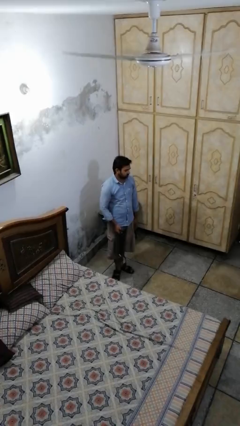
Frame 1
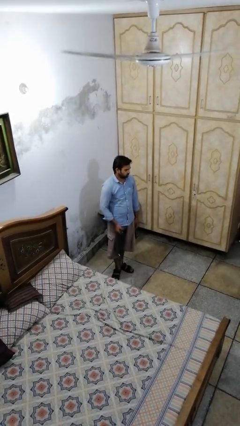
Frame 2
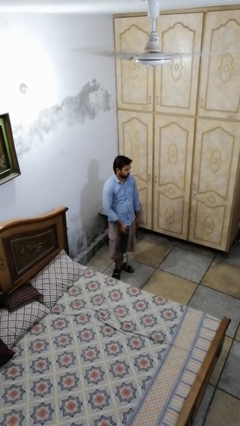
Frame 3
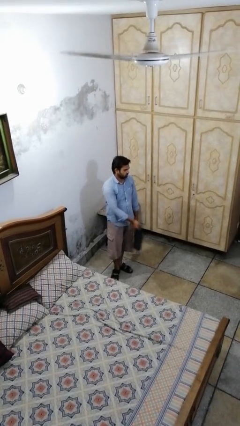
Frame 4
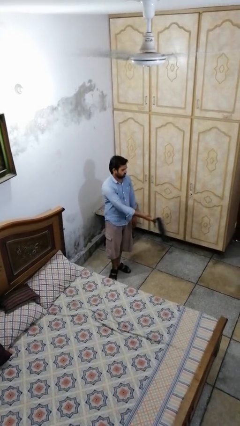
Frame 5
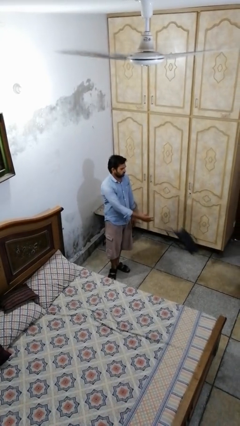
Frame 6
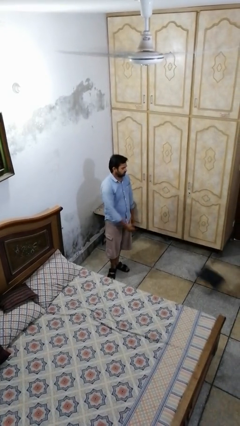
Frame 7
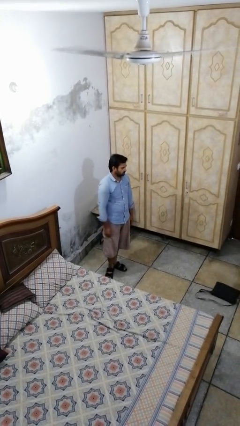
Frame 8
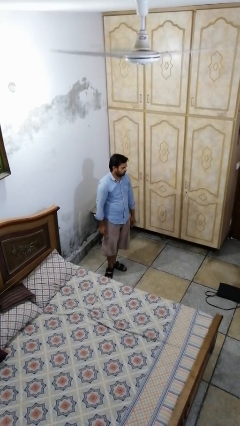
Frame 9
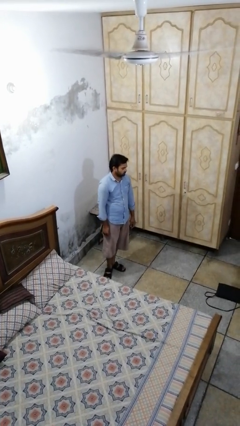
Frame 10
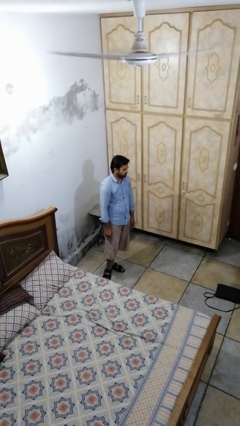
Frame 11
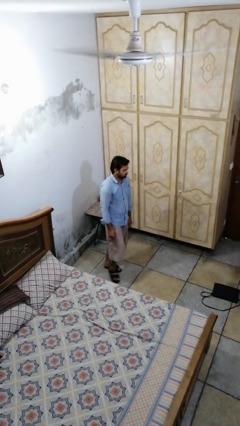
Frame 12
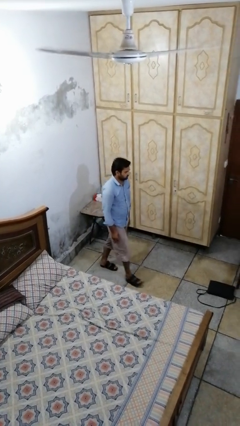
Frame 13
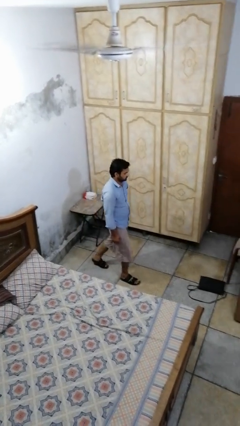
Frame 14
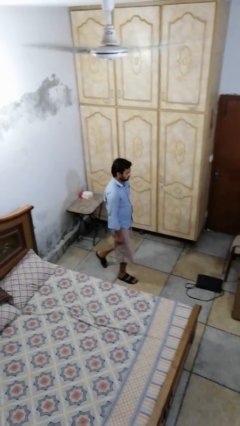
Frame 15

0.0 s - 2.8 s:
person throws object to ground

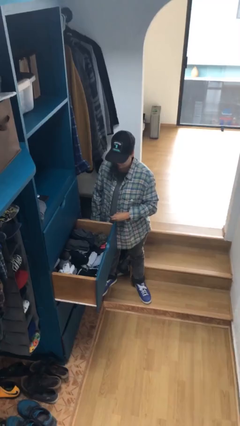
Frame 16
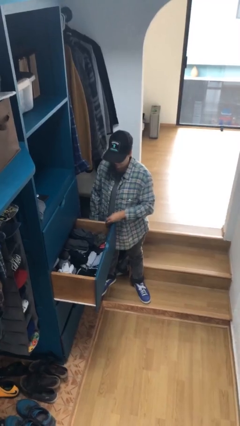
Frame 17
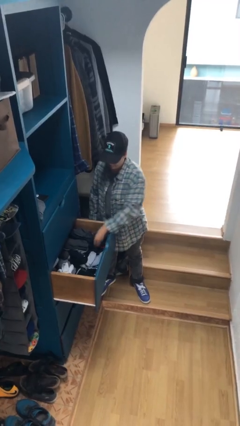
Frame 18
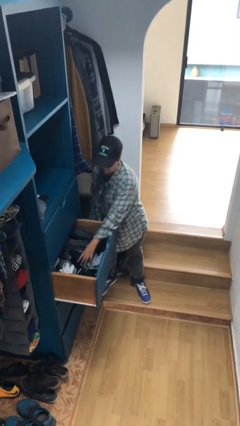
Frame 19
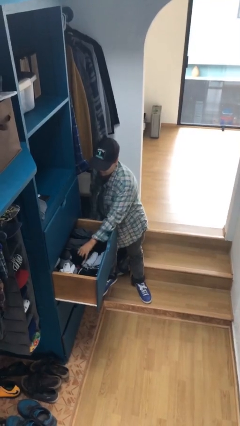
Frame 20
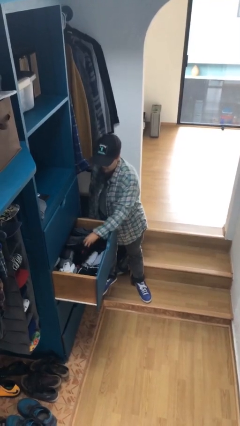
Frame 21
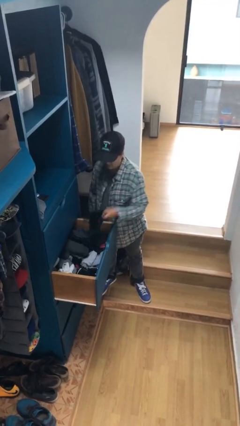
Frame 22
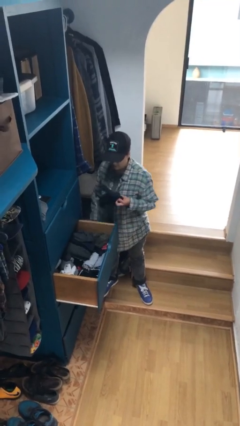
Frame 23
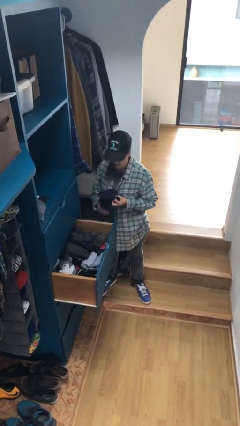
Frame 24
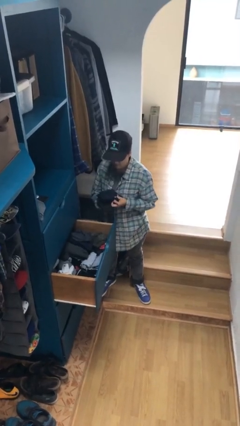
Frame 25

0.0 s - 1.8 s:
person takes clothes from dresser

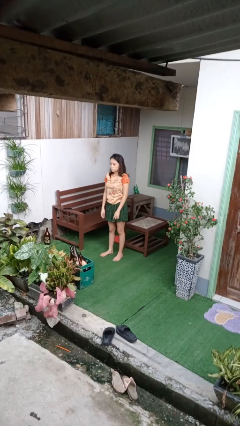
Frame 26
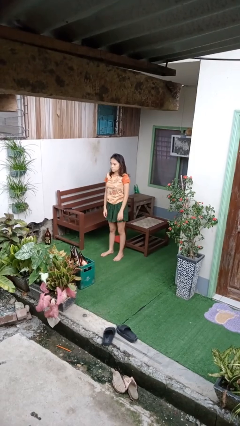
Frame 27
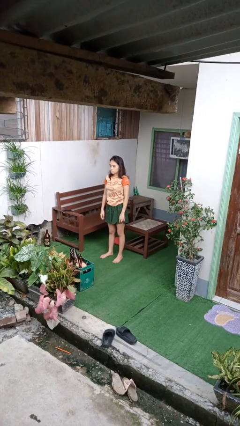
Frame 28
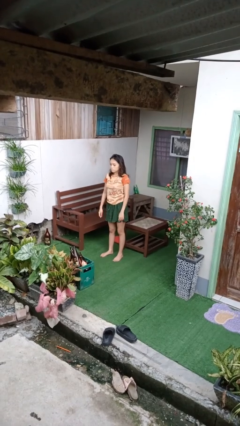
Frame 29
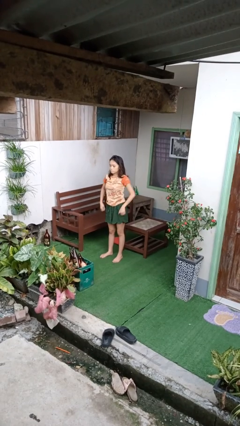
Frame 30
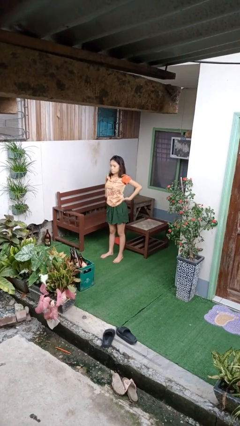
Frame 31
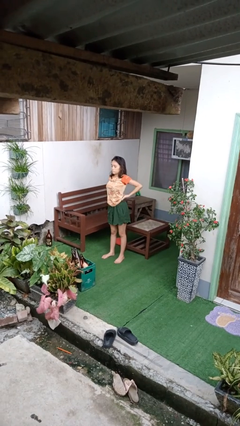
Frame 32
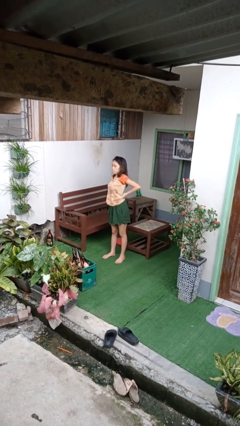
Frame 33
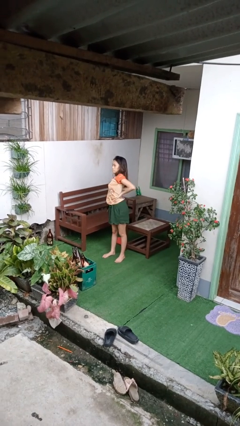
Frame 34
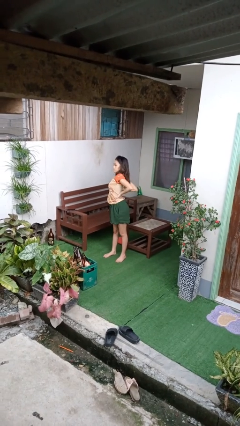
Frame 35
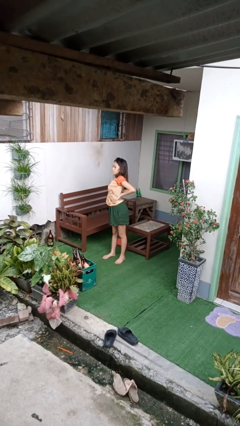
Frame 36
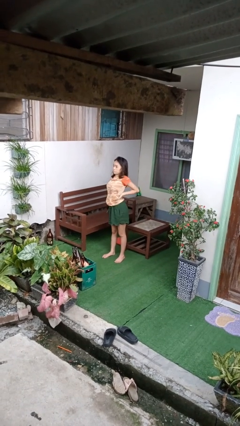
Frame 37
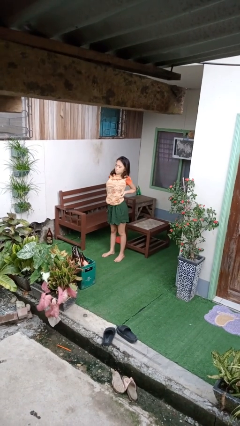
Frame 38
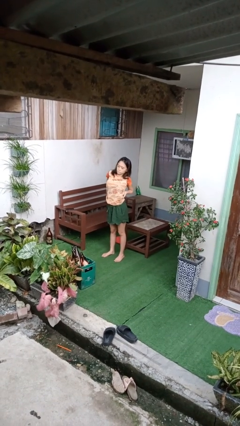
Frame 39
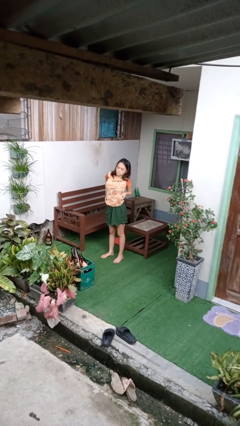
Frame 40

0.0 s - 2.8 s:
person stretches back

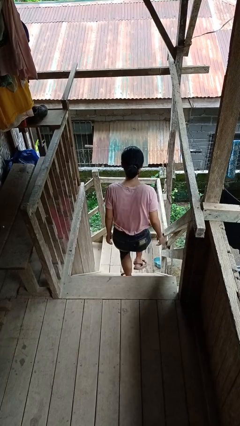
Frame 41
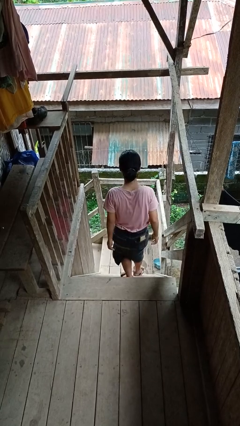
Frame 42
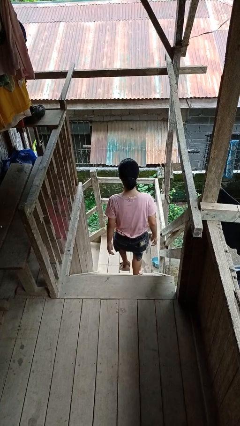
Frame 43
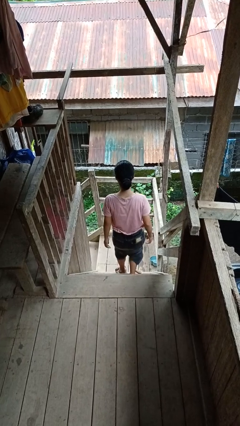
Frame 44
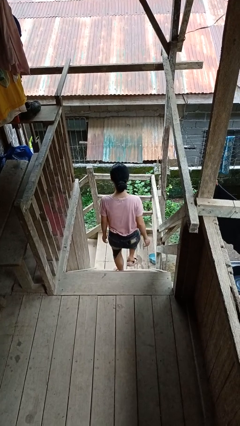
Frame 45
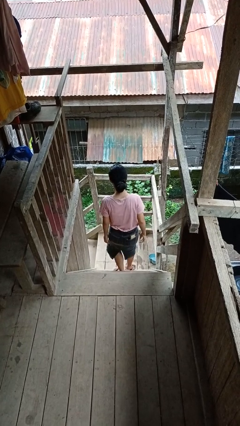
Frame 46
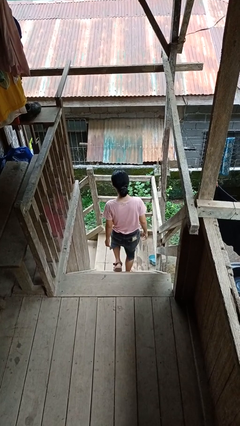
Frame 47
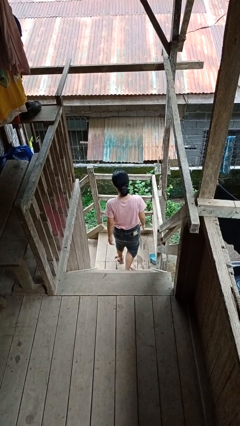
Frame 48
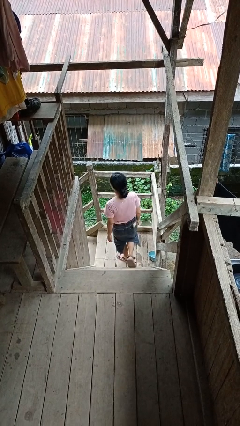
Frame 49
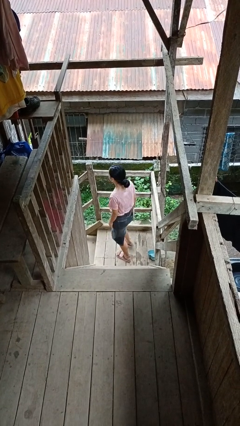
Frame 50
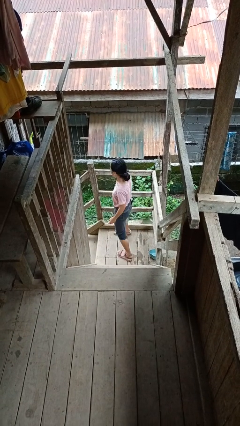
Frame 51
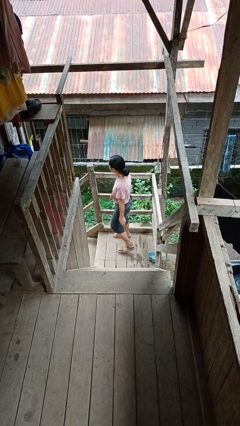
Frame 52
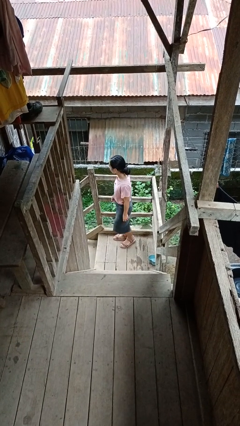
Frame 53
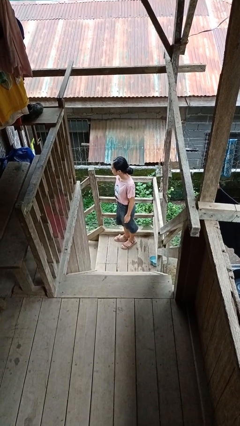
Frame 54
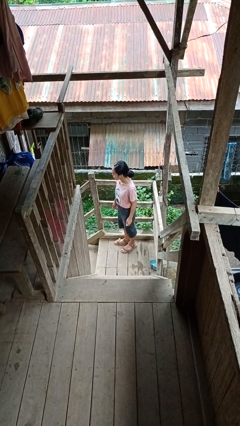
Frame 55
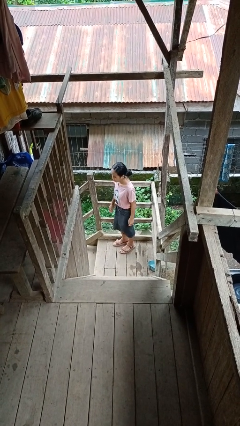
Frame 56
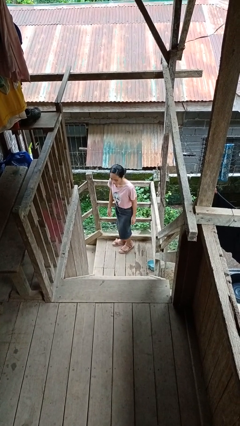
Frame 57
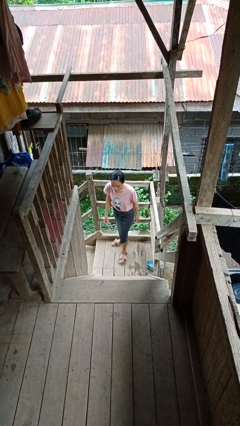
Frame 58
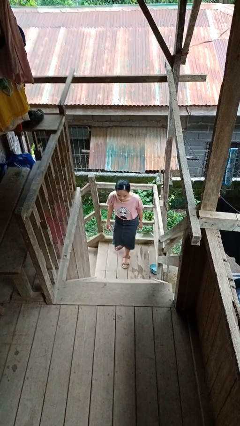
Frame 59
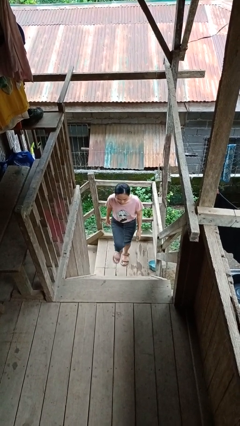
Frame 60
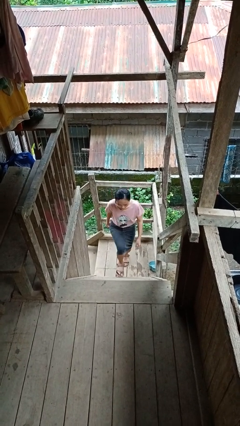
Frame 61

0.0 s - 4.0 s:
person climbs down stairs

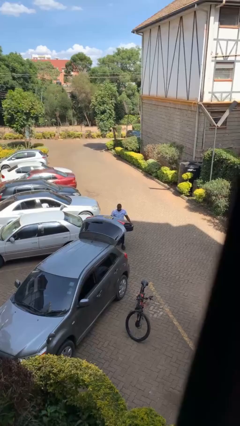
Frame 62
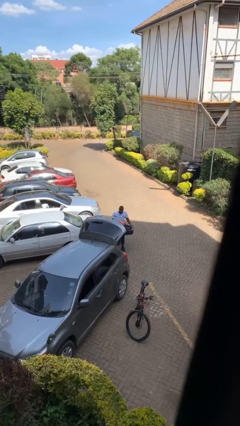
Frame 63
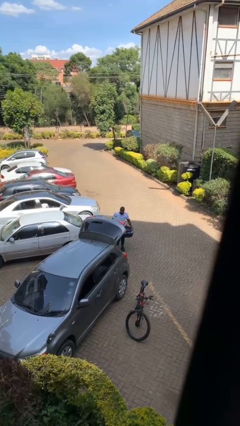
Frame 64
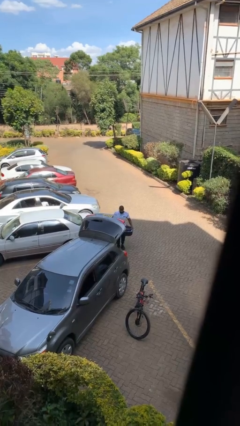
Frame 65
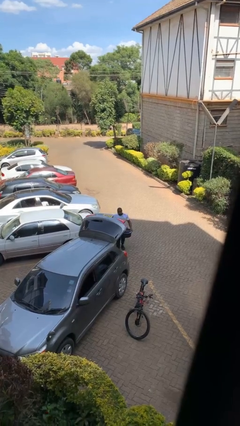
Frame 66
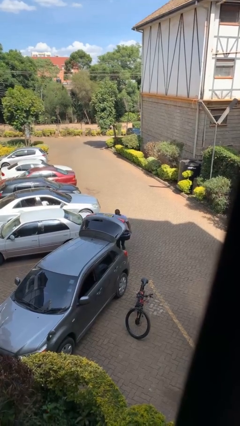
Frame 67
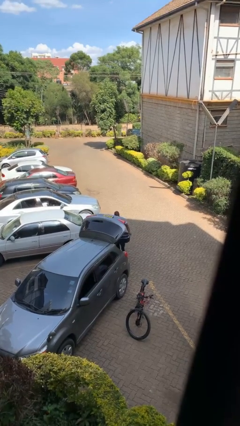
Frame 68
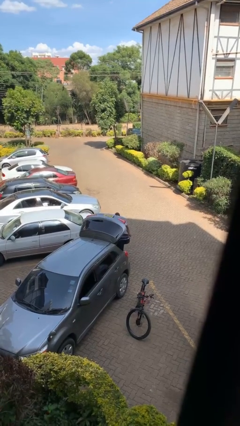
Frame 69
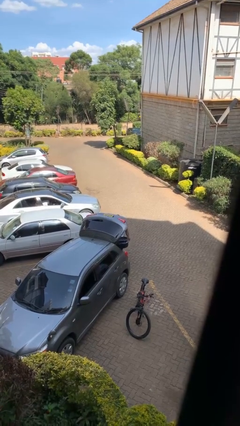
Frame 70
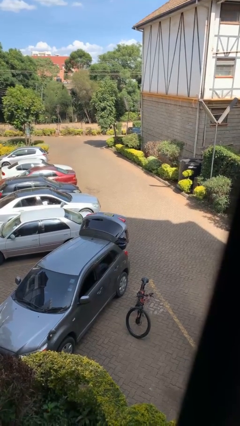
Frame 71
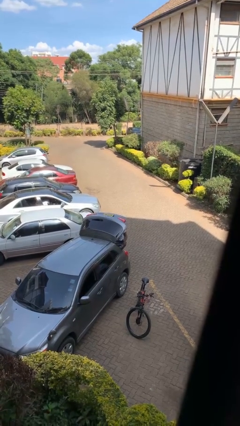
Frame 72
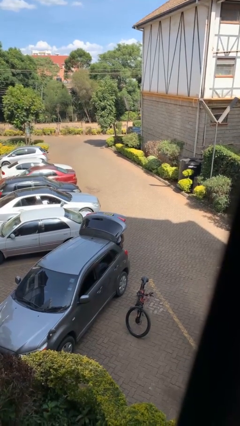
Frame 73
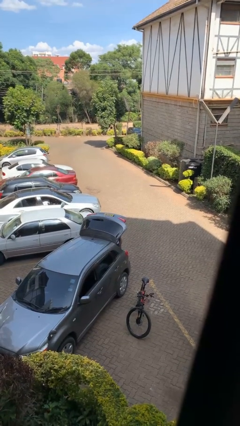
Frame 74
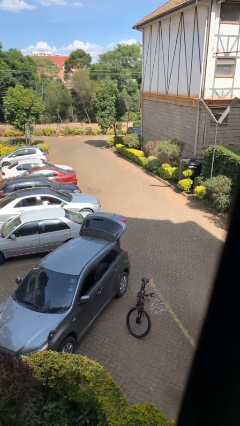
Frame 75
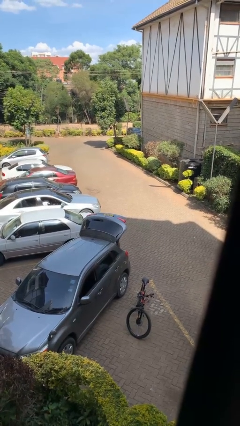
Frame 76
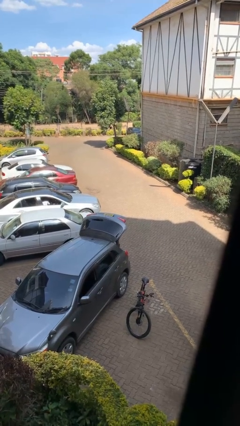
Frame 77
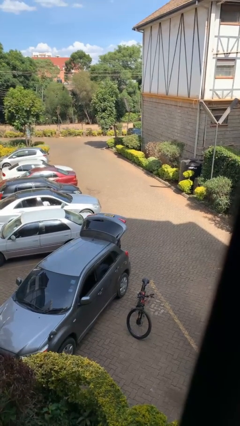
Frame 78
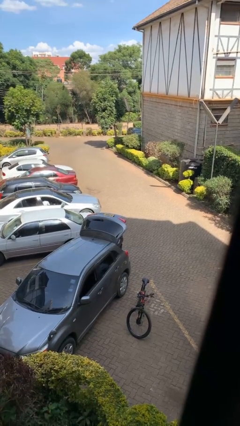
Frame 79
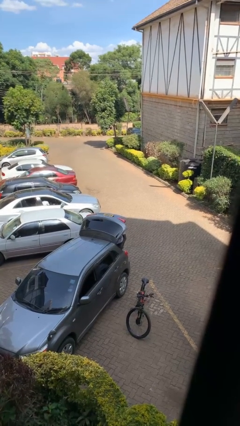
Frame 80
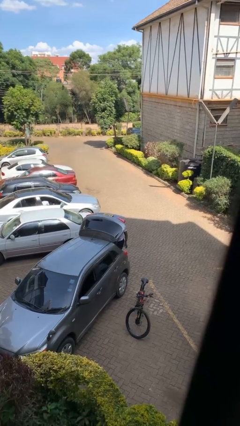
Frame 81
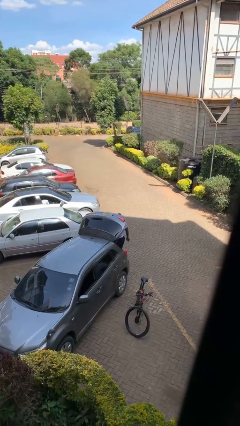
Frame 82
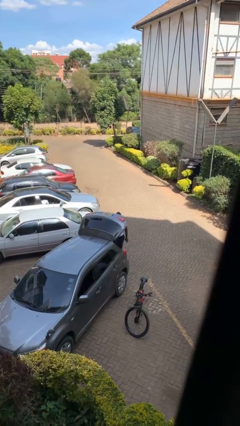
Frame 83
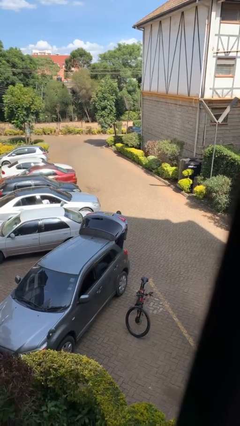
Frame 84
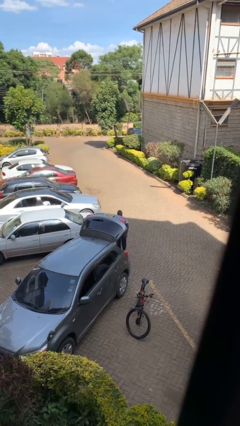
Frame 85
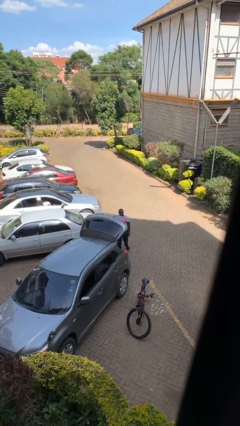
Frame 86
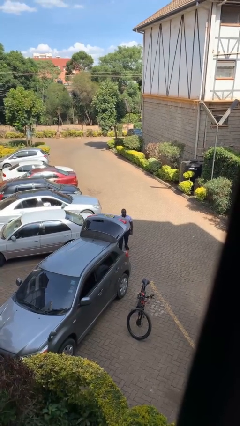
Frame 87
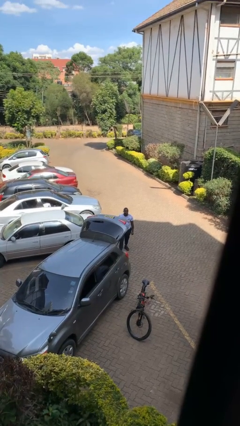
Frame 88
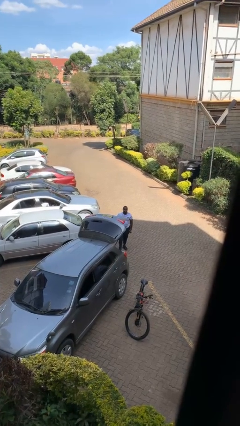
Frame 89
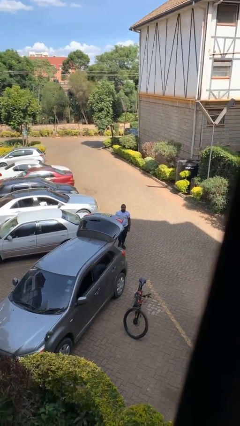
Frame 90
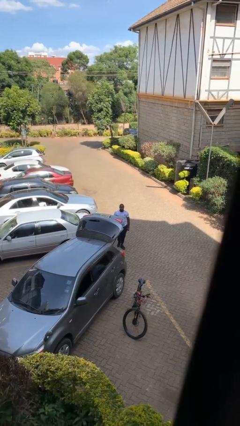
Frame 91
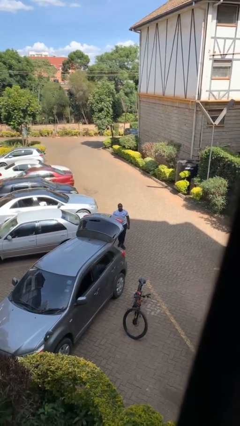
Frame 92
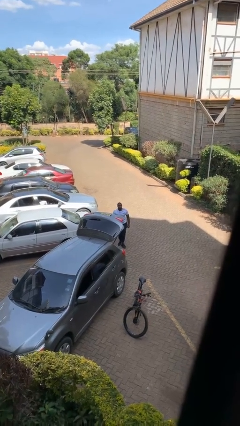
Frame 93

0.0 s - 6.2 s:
person loads car
